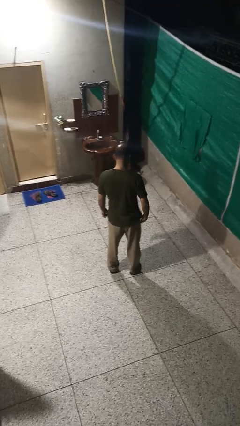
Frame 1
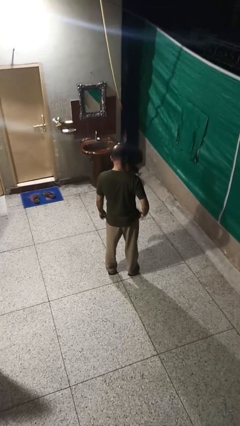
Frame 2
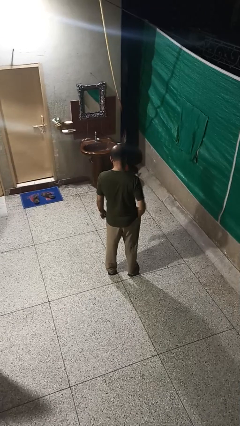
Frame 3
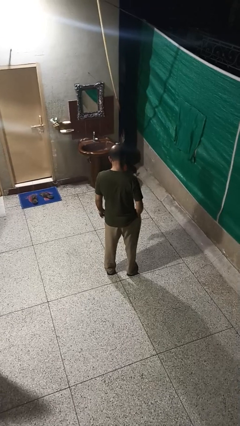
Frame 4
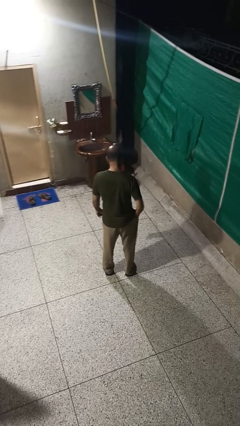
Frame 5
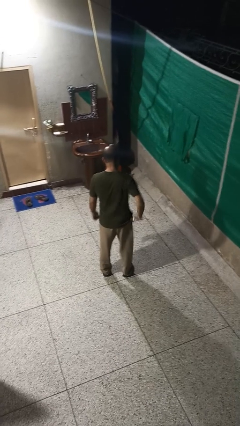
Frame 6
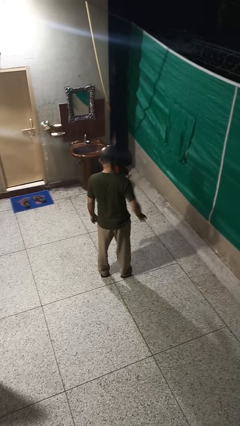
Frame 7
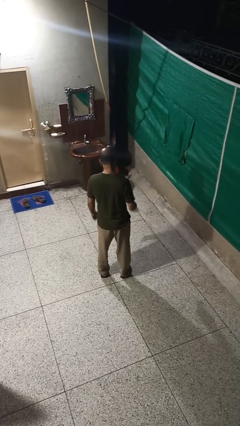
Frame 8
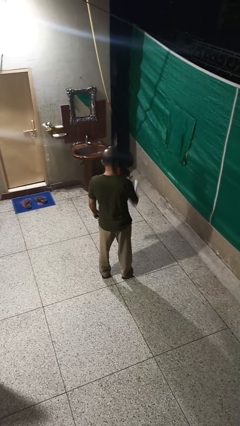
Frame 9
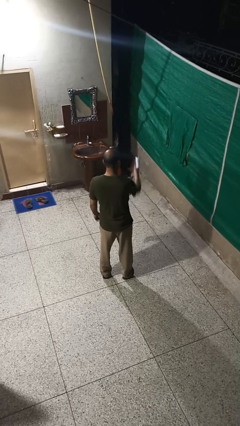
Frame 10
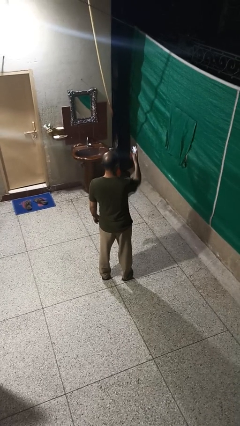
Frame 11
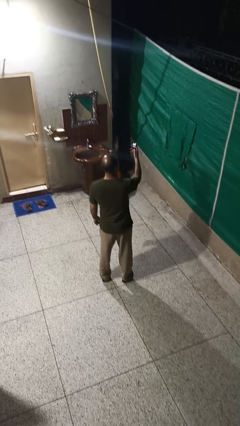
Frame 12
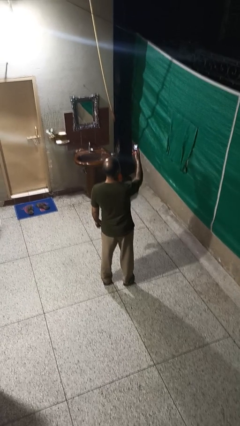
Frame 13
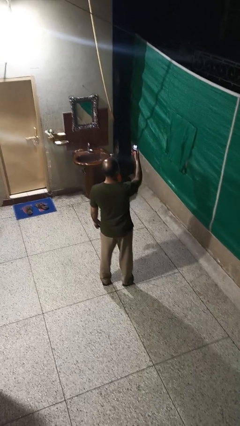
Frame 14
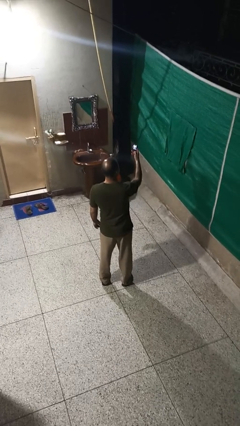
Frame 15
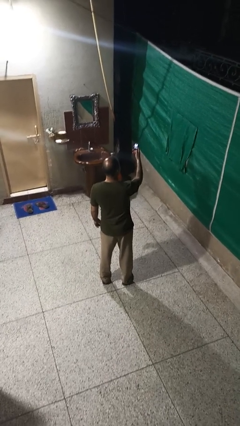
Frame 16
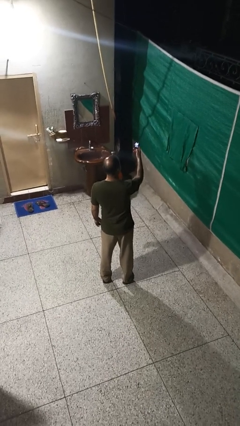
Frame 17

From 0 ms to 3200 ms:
person takes phone from pocket

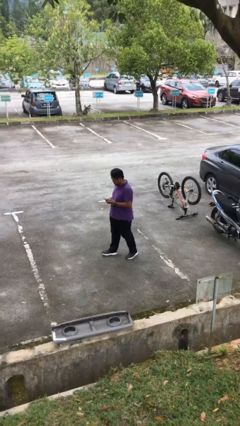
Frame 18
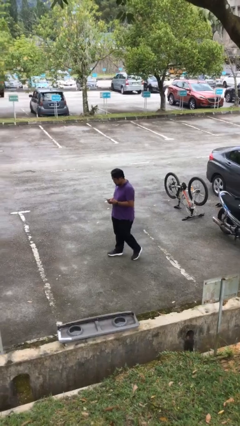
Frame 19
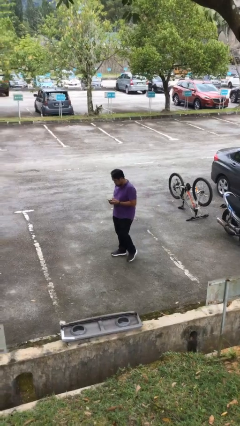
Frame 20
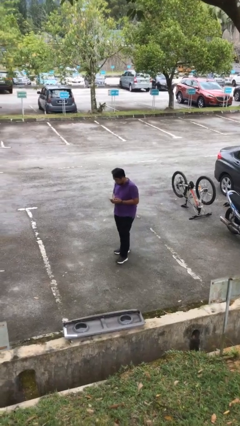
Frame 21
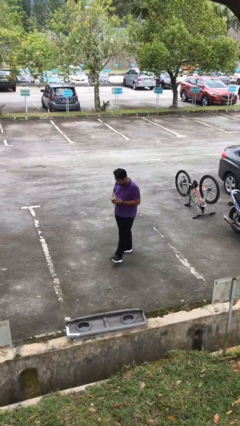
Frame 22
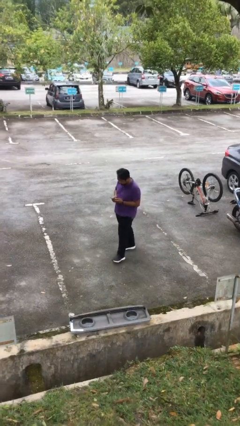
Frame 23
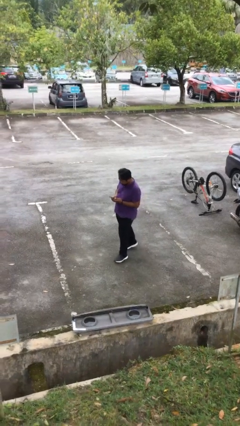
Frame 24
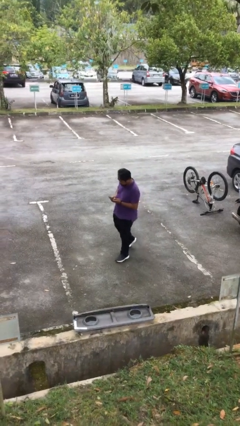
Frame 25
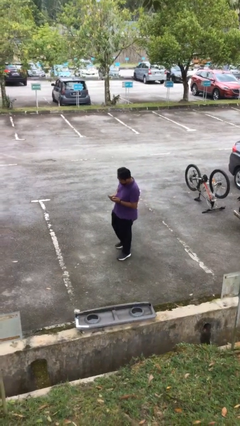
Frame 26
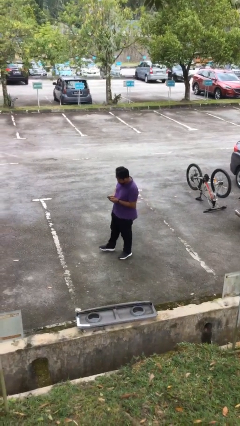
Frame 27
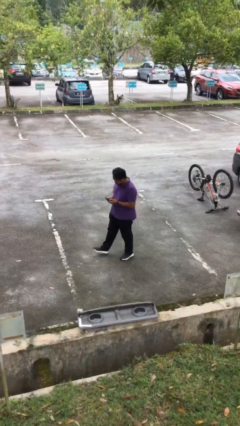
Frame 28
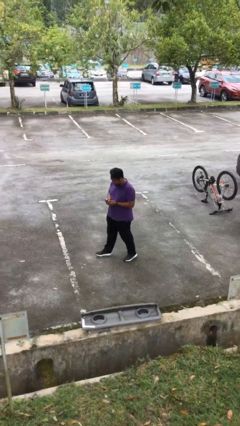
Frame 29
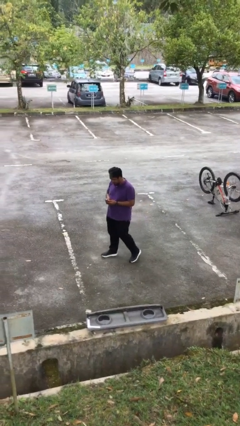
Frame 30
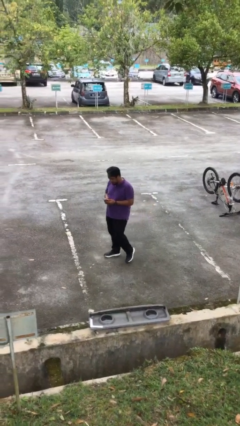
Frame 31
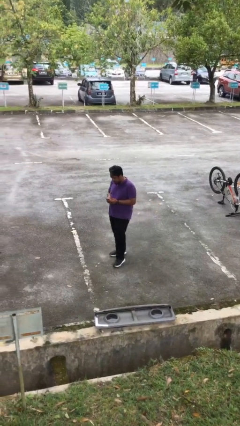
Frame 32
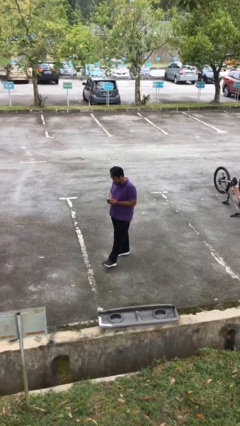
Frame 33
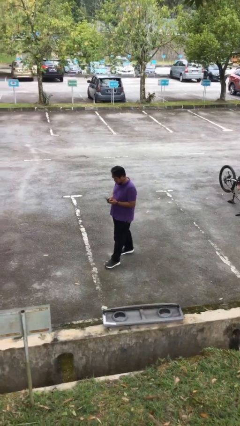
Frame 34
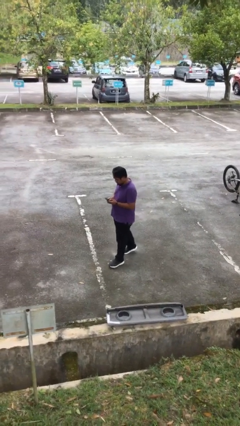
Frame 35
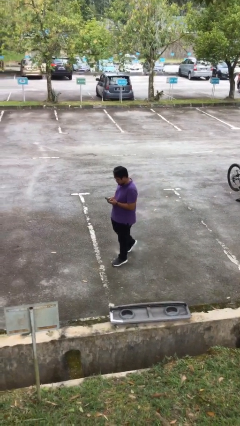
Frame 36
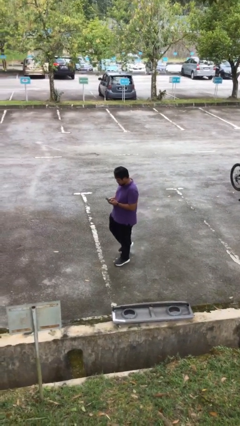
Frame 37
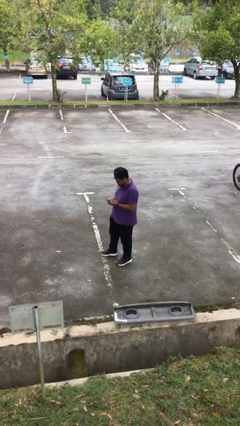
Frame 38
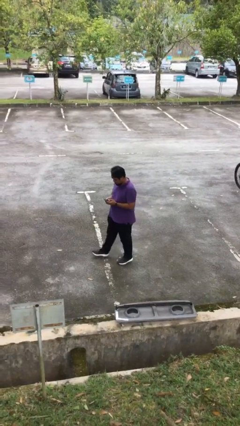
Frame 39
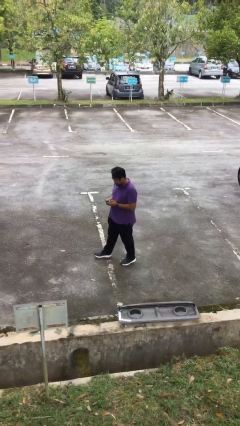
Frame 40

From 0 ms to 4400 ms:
person texts on phone

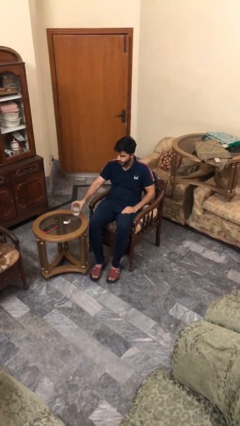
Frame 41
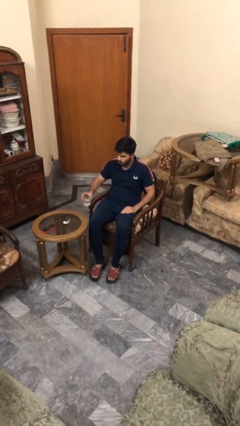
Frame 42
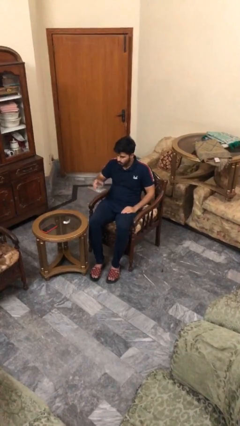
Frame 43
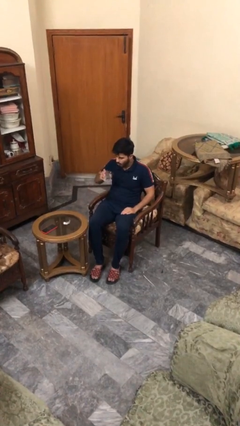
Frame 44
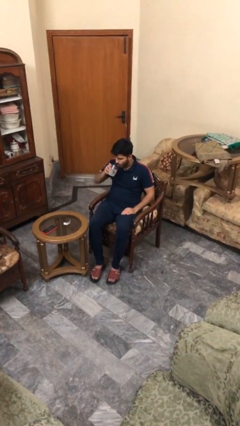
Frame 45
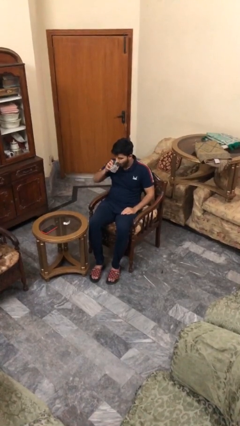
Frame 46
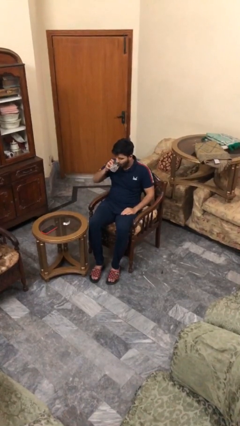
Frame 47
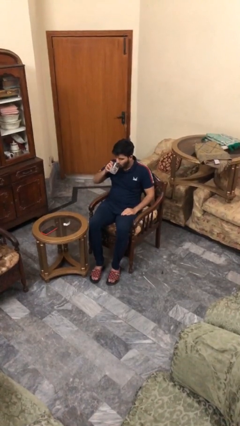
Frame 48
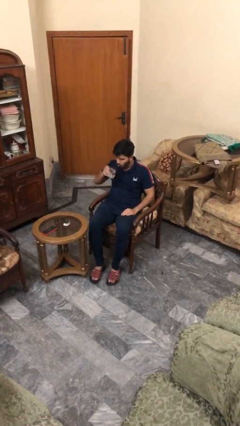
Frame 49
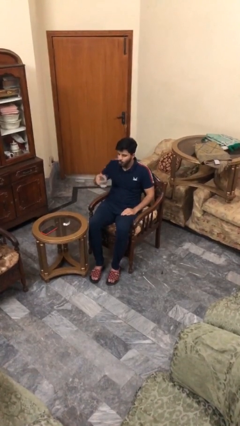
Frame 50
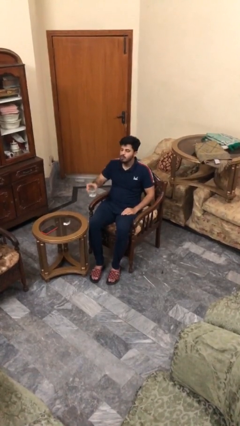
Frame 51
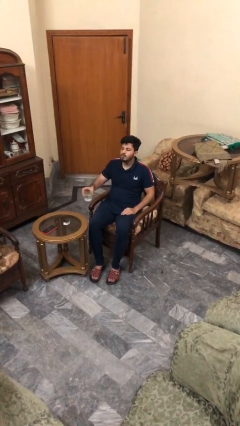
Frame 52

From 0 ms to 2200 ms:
person drinks from cup

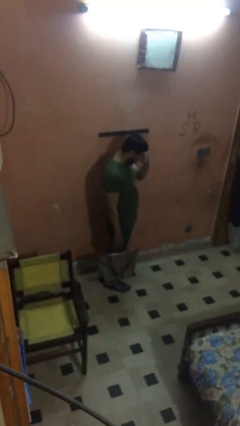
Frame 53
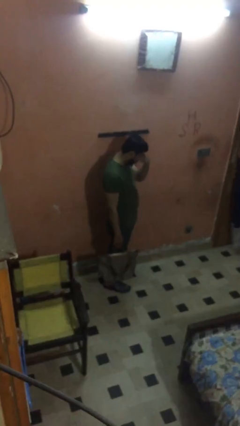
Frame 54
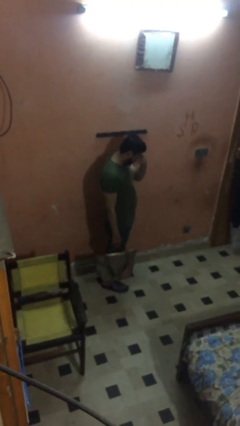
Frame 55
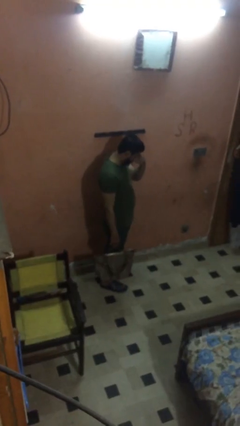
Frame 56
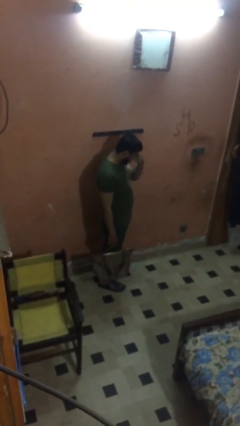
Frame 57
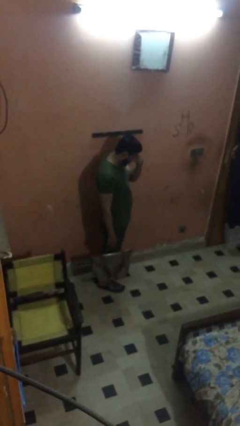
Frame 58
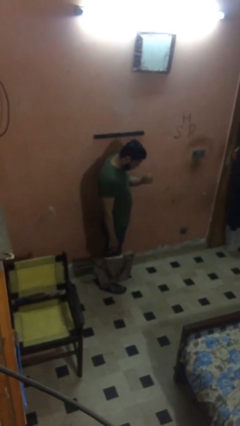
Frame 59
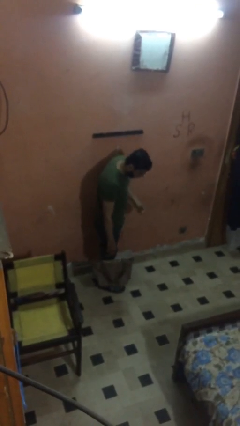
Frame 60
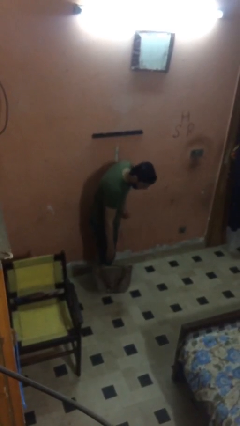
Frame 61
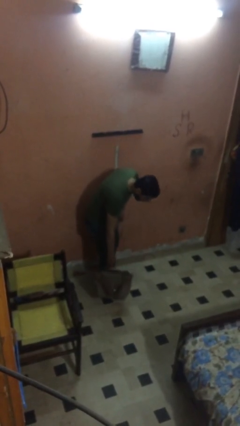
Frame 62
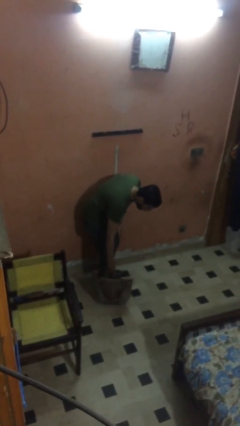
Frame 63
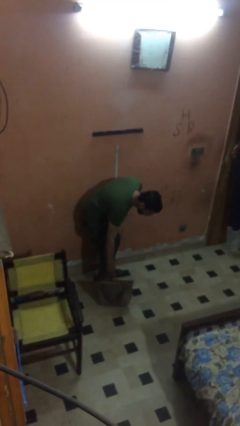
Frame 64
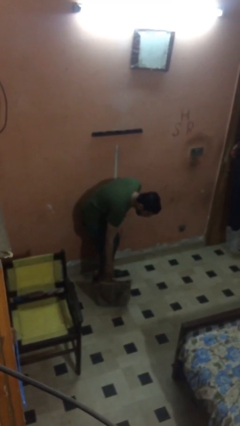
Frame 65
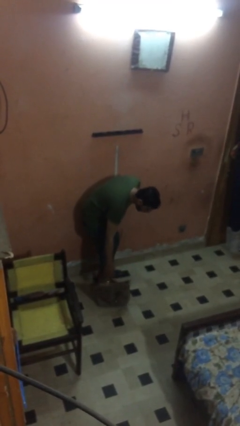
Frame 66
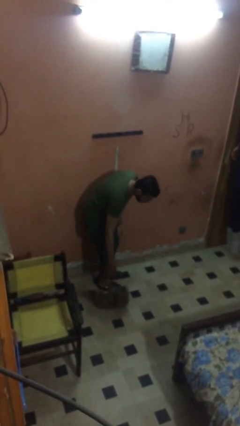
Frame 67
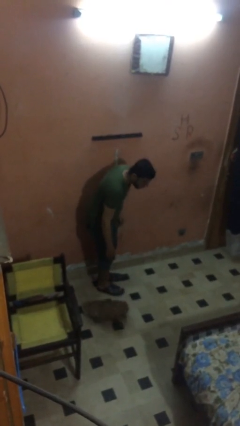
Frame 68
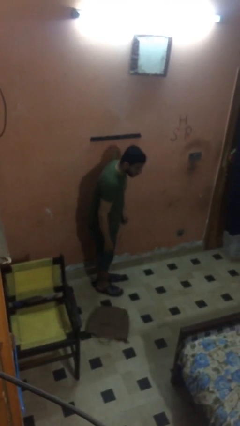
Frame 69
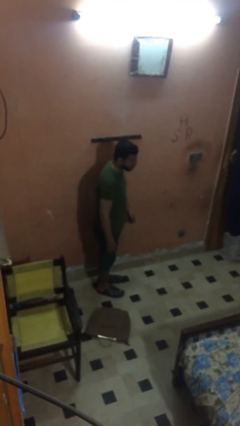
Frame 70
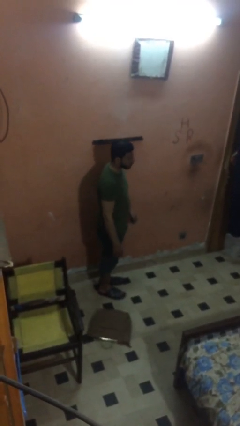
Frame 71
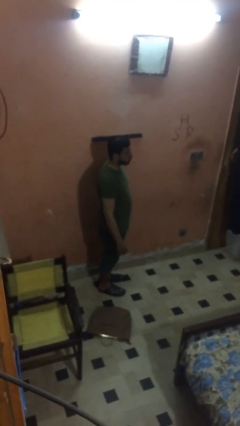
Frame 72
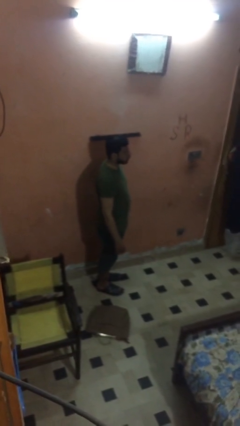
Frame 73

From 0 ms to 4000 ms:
person puts down object on floor

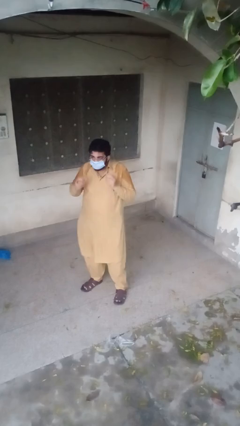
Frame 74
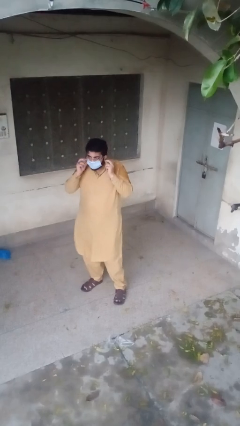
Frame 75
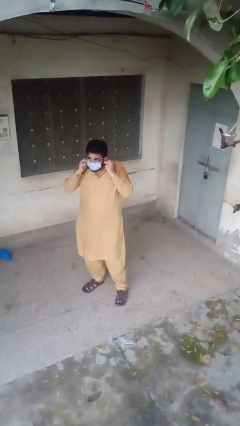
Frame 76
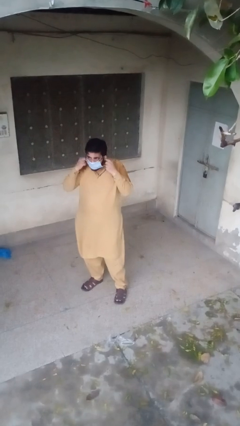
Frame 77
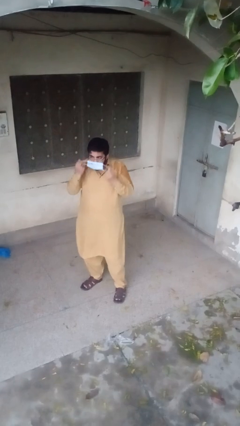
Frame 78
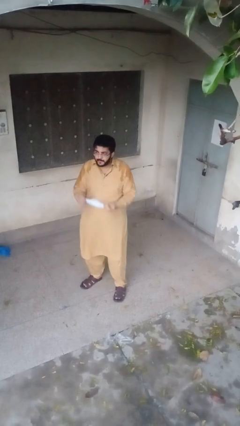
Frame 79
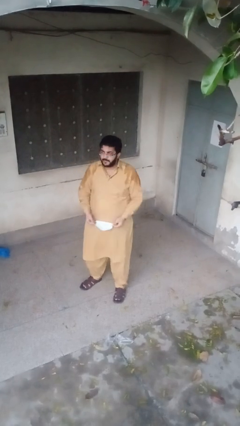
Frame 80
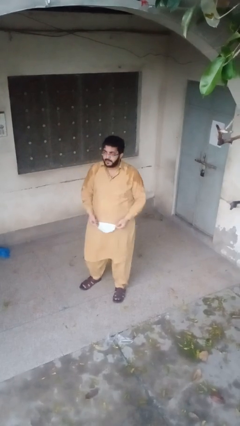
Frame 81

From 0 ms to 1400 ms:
person takes off facemask

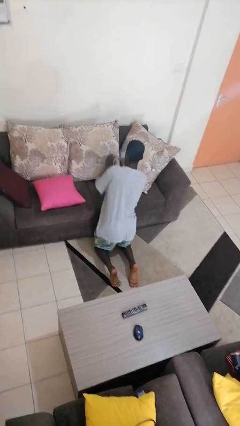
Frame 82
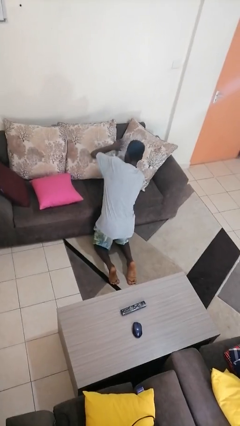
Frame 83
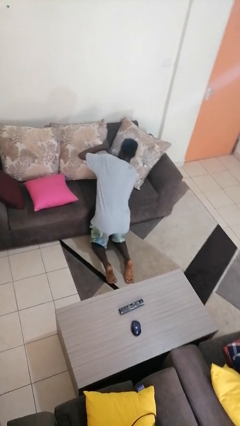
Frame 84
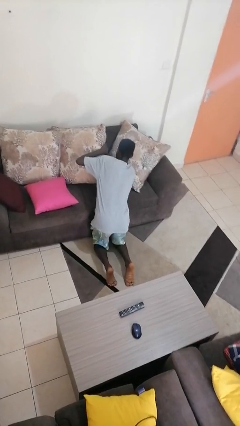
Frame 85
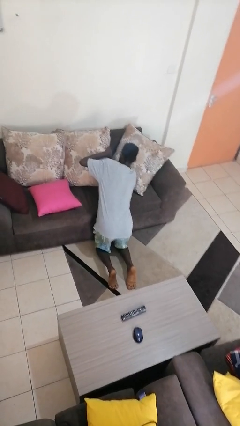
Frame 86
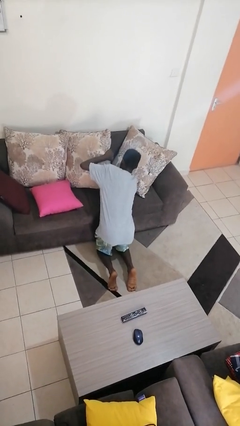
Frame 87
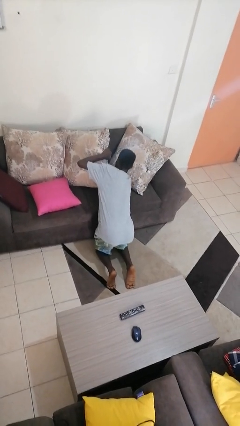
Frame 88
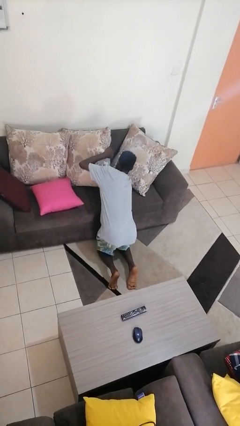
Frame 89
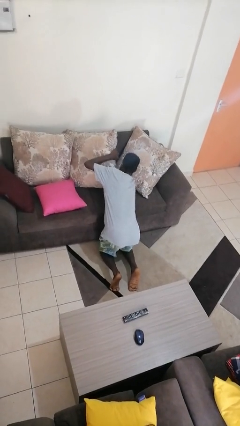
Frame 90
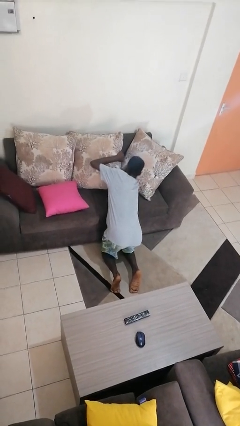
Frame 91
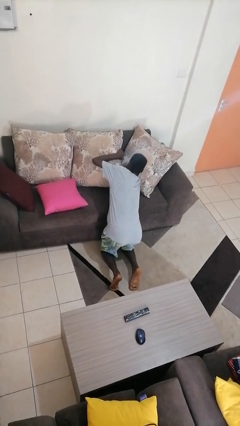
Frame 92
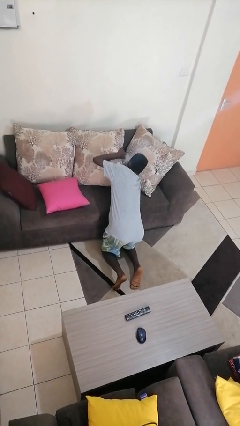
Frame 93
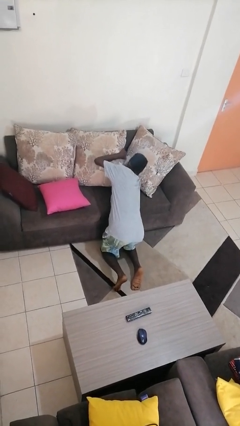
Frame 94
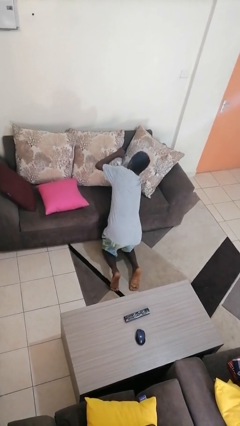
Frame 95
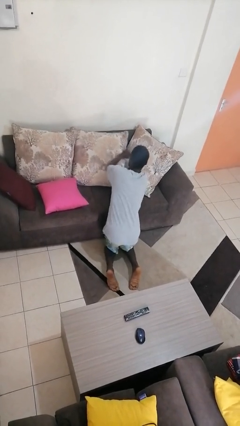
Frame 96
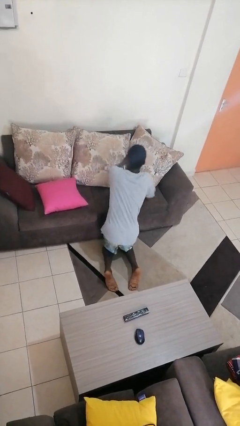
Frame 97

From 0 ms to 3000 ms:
person searches in couch
